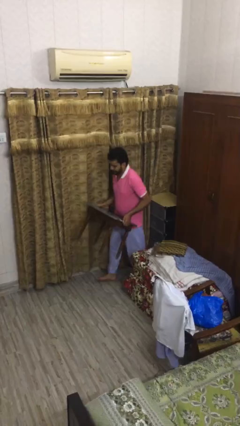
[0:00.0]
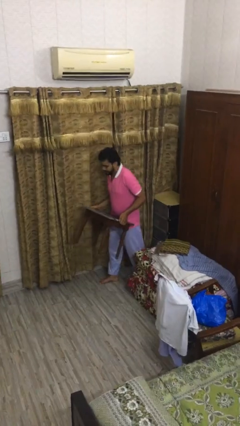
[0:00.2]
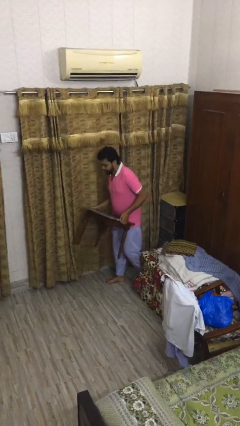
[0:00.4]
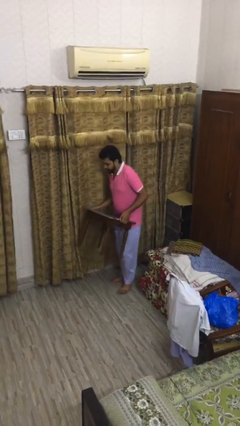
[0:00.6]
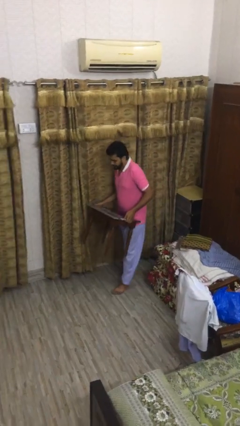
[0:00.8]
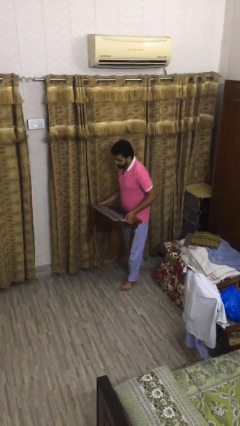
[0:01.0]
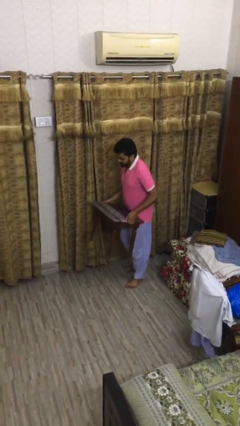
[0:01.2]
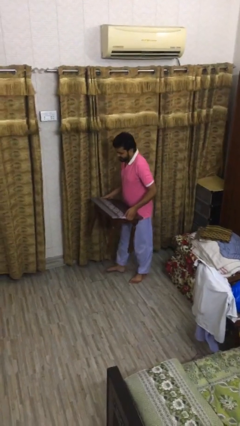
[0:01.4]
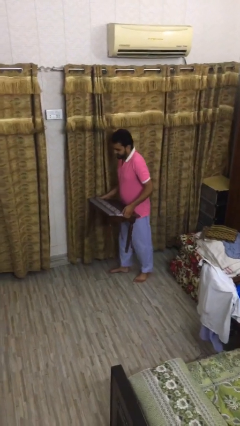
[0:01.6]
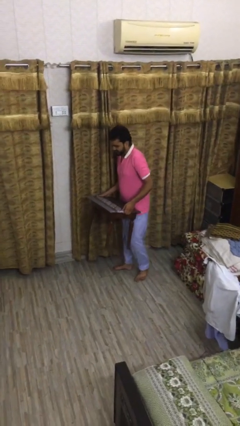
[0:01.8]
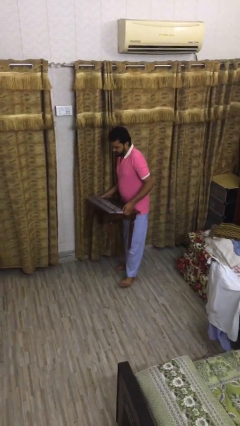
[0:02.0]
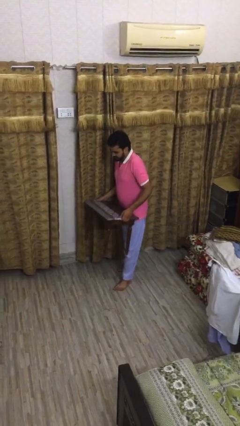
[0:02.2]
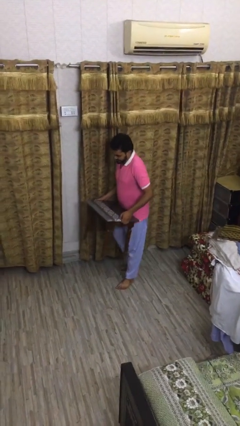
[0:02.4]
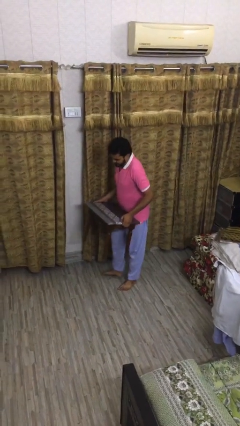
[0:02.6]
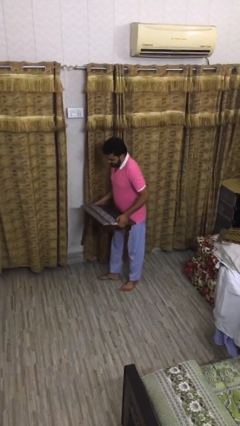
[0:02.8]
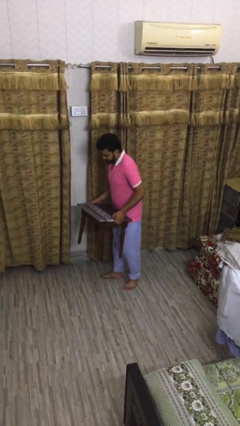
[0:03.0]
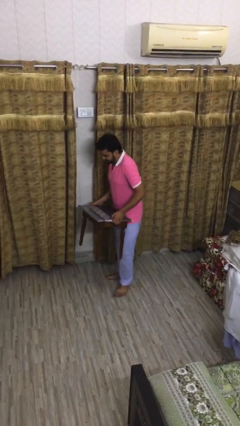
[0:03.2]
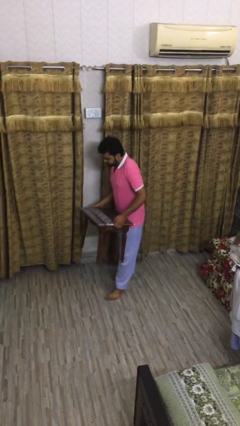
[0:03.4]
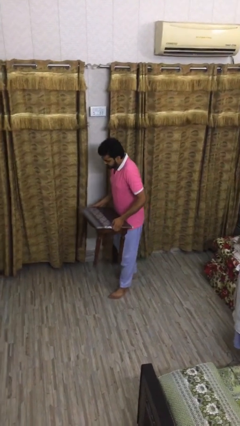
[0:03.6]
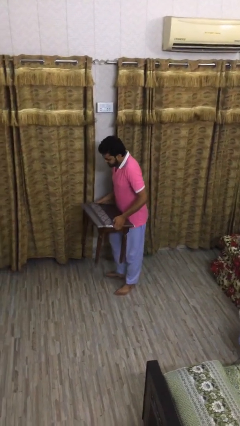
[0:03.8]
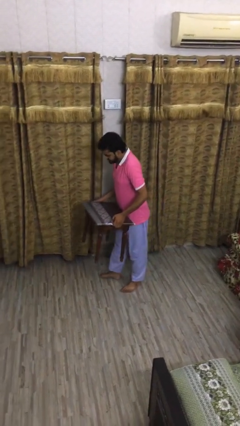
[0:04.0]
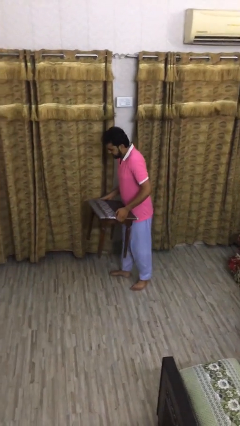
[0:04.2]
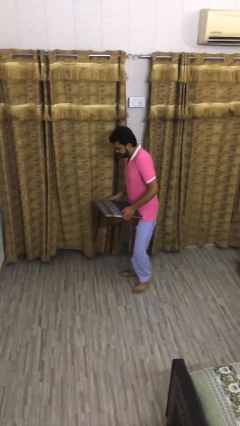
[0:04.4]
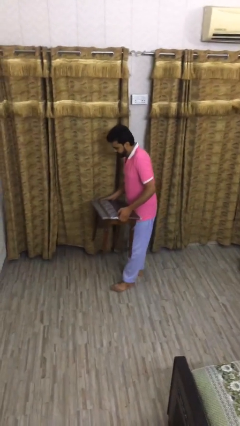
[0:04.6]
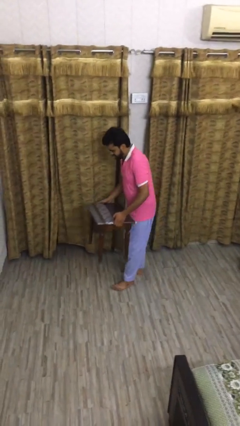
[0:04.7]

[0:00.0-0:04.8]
person carries heavy object

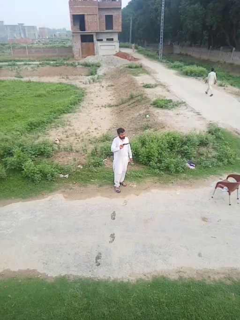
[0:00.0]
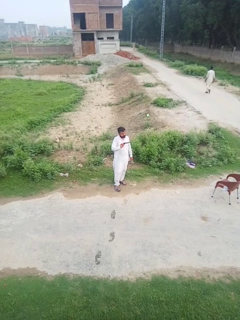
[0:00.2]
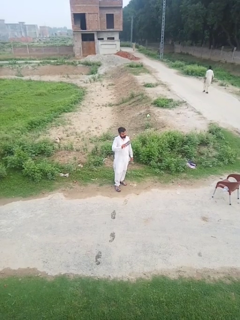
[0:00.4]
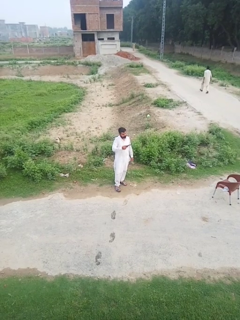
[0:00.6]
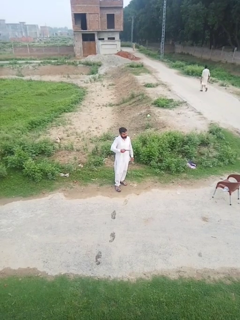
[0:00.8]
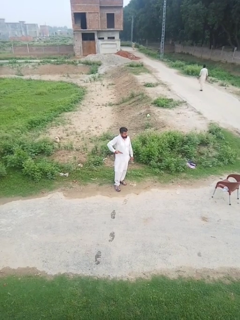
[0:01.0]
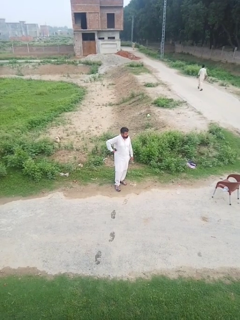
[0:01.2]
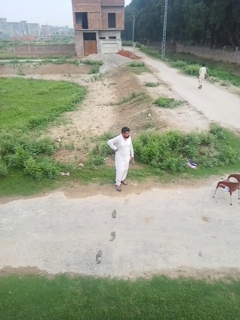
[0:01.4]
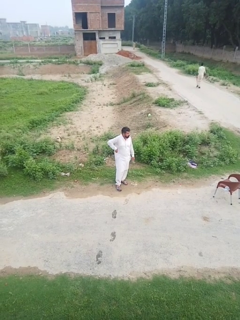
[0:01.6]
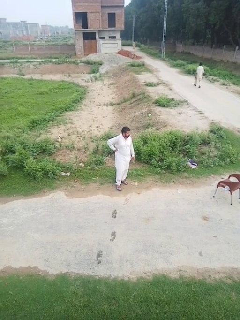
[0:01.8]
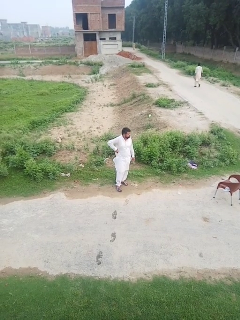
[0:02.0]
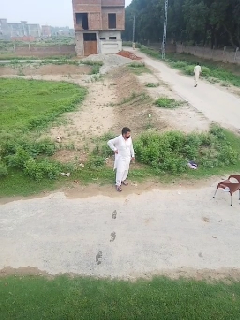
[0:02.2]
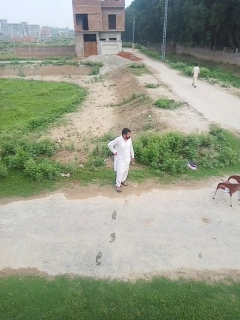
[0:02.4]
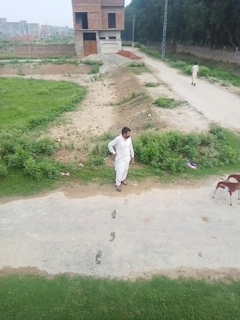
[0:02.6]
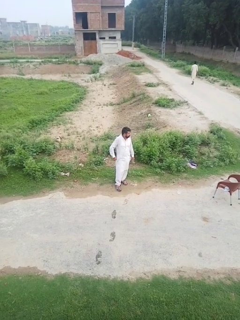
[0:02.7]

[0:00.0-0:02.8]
person puts phone into pocket

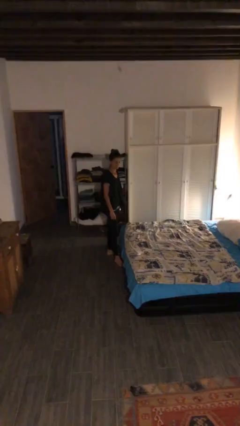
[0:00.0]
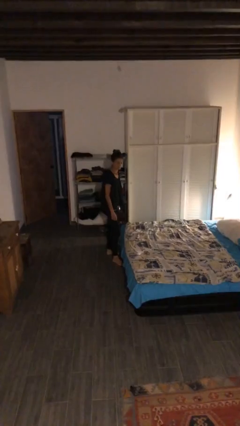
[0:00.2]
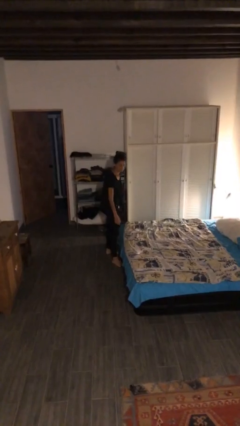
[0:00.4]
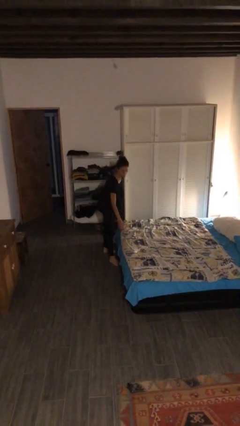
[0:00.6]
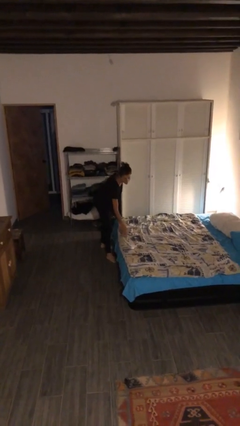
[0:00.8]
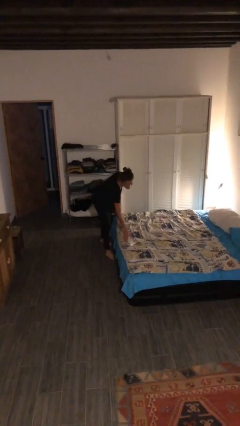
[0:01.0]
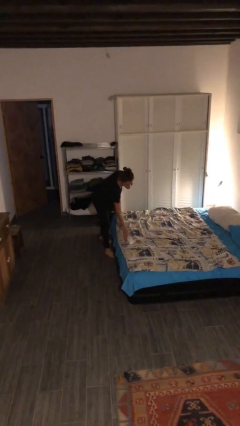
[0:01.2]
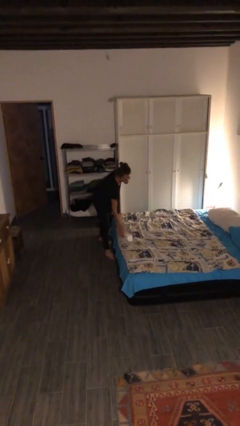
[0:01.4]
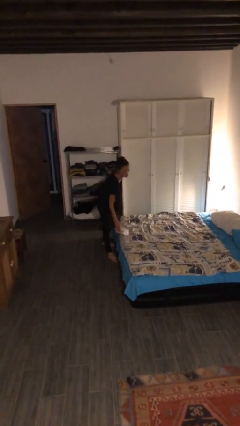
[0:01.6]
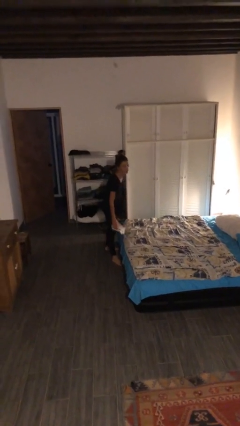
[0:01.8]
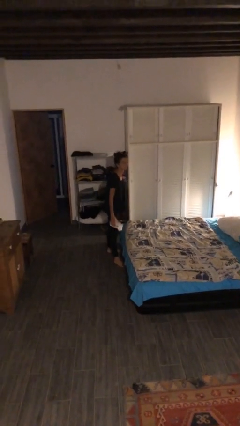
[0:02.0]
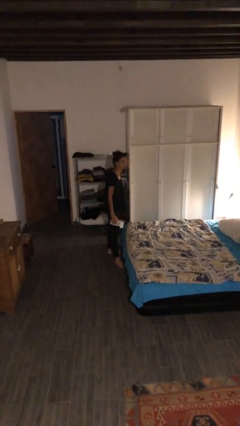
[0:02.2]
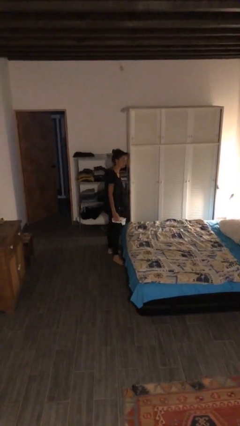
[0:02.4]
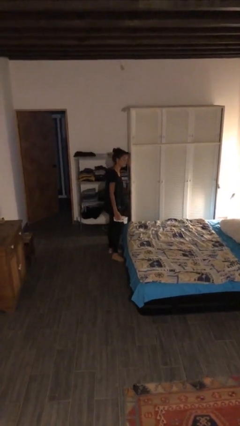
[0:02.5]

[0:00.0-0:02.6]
person picks up object from bed

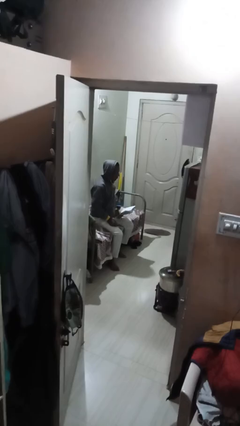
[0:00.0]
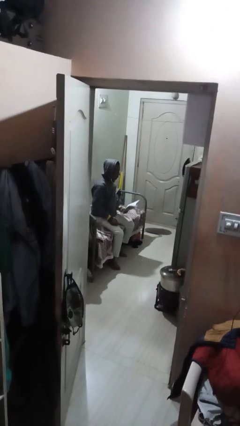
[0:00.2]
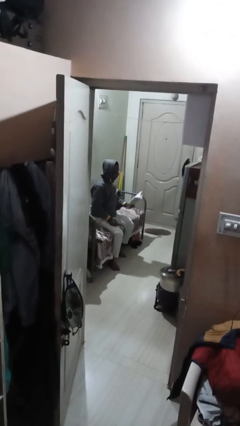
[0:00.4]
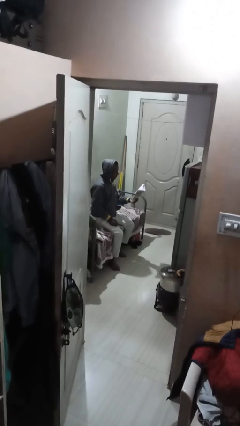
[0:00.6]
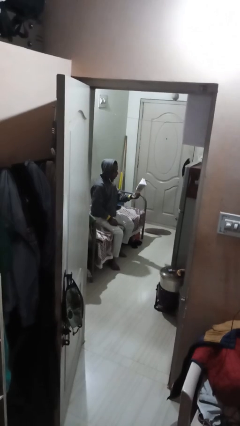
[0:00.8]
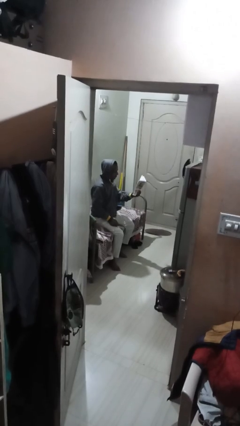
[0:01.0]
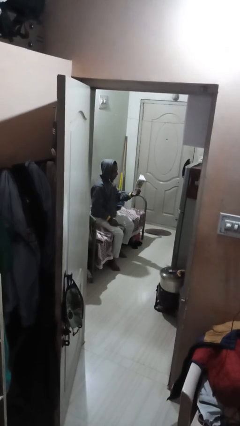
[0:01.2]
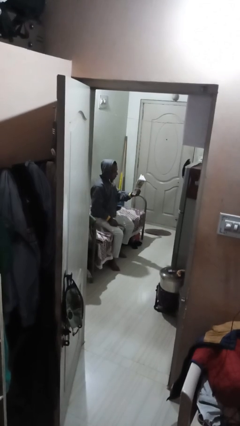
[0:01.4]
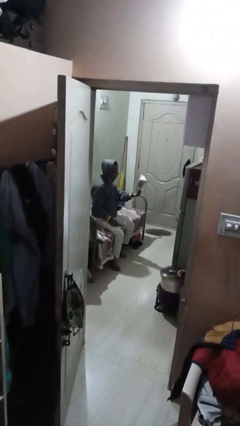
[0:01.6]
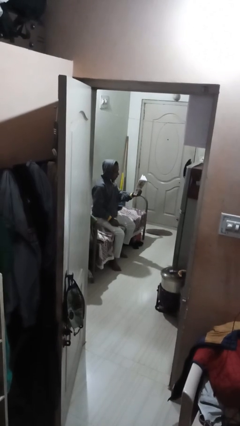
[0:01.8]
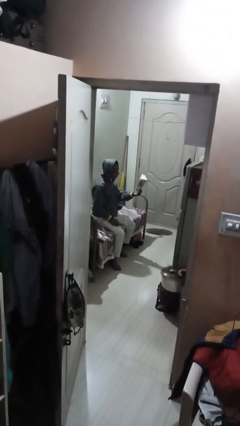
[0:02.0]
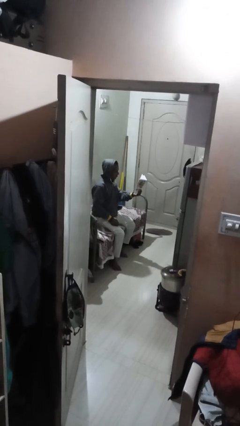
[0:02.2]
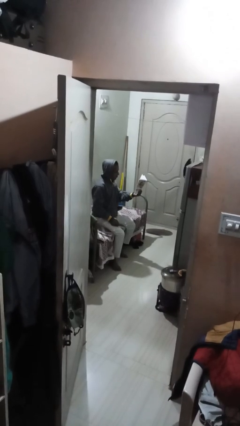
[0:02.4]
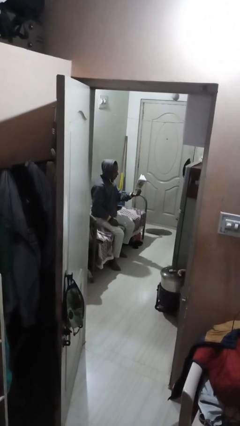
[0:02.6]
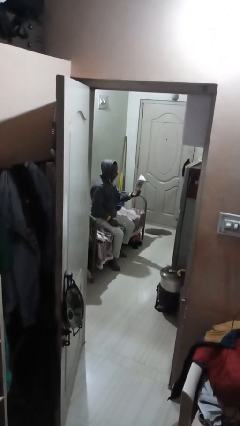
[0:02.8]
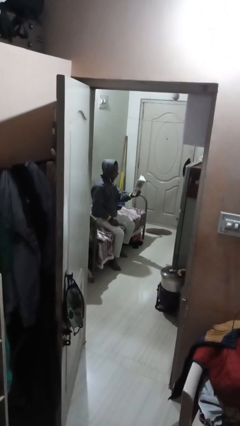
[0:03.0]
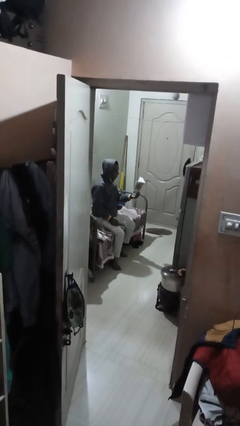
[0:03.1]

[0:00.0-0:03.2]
person reads document

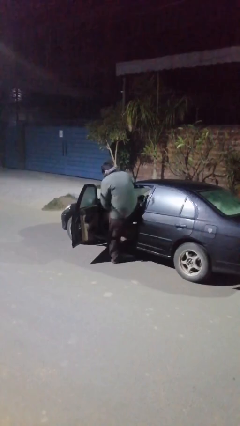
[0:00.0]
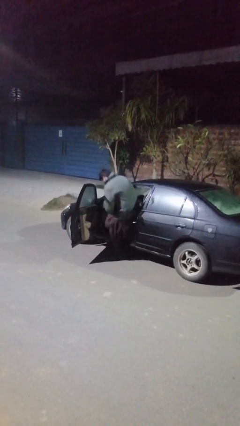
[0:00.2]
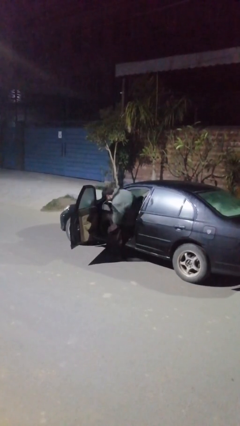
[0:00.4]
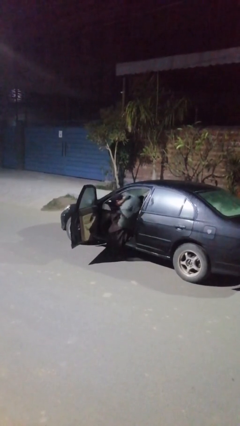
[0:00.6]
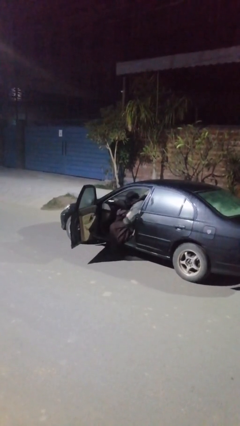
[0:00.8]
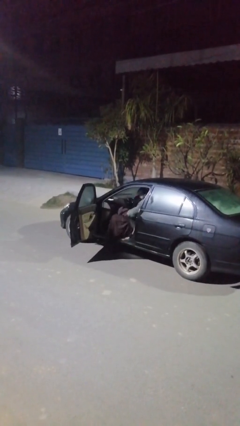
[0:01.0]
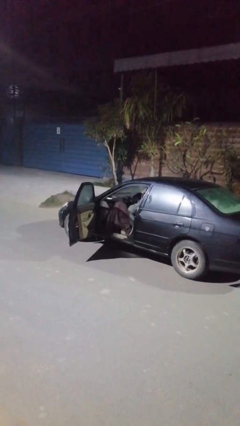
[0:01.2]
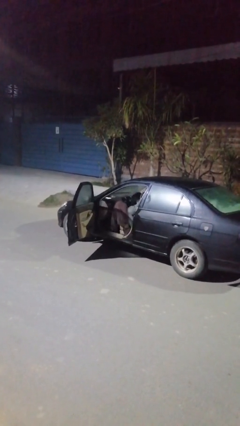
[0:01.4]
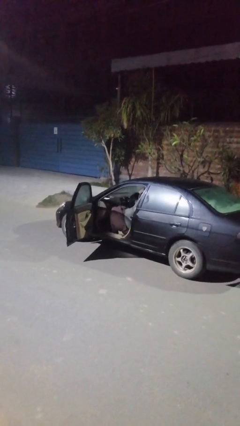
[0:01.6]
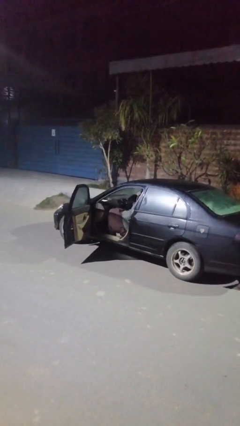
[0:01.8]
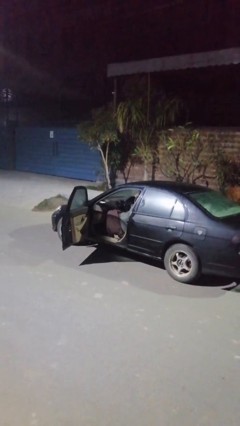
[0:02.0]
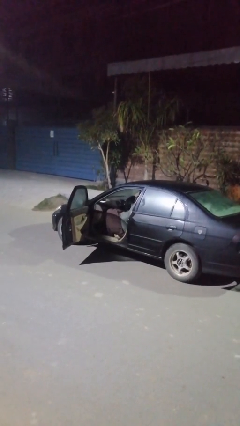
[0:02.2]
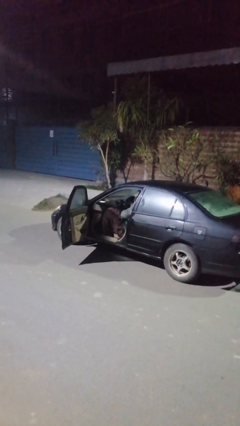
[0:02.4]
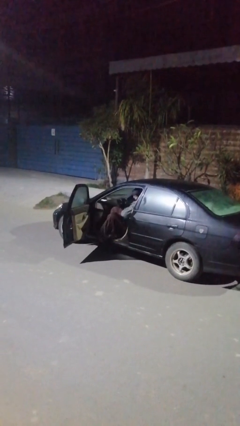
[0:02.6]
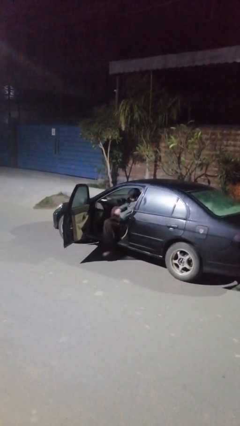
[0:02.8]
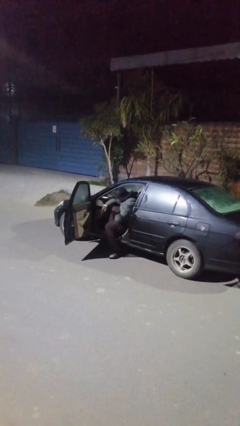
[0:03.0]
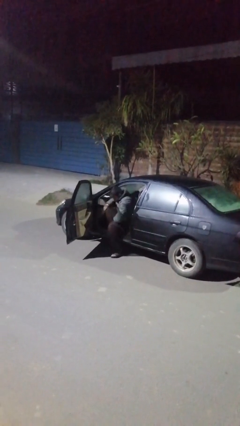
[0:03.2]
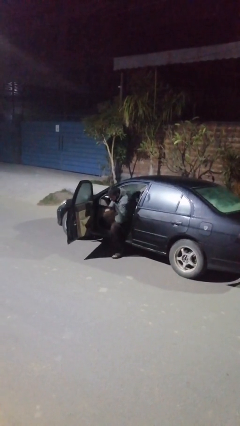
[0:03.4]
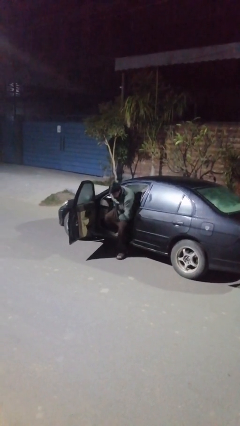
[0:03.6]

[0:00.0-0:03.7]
person enters car

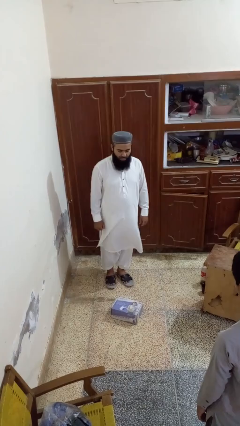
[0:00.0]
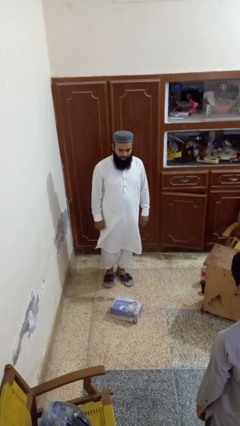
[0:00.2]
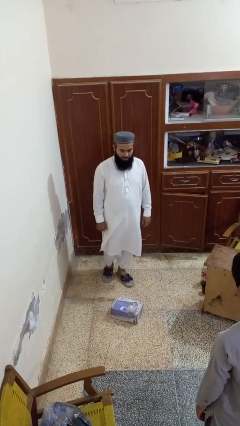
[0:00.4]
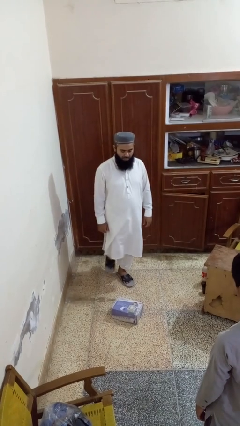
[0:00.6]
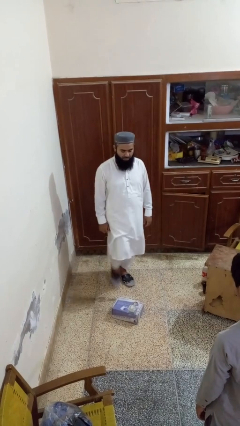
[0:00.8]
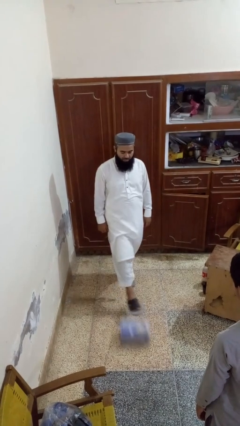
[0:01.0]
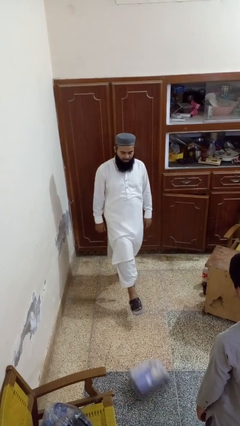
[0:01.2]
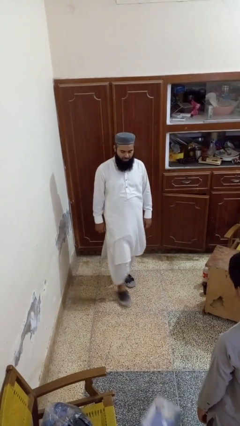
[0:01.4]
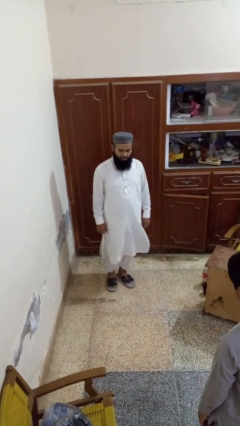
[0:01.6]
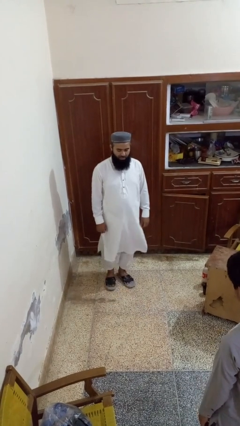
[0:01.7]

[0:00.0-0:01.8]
person kicks object to person
